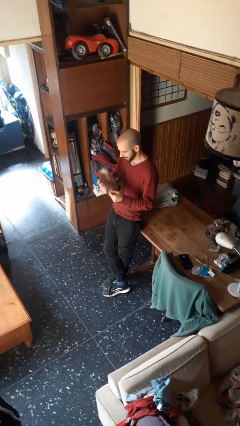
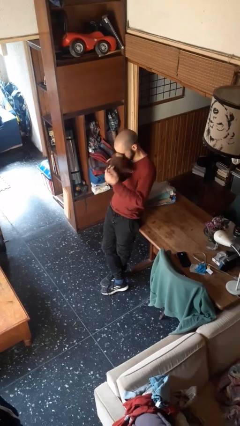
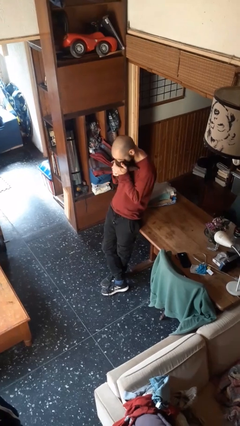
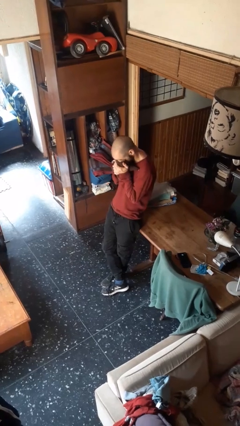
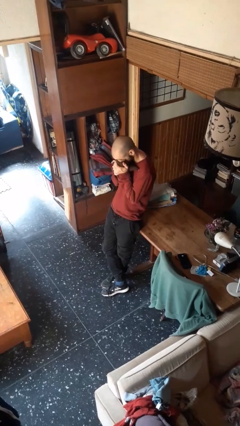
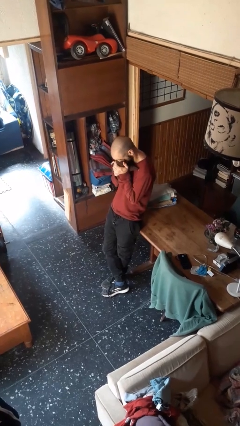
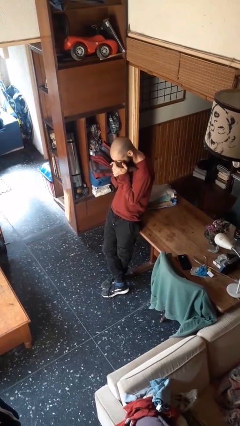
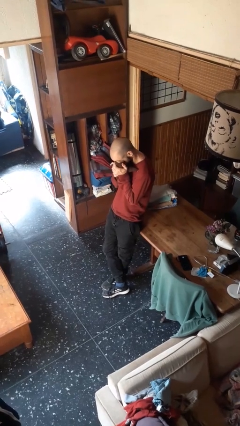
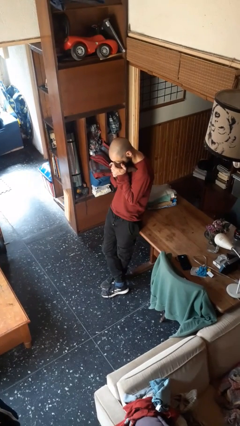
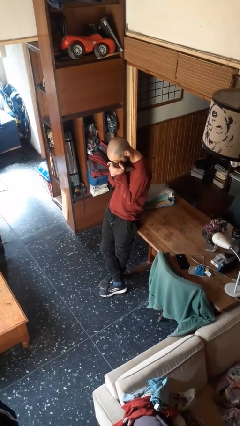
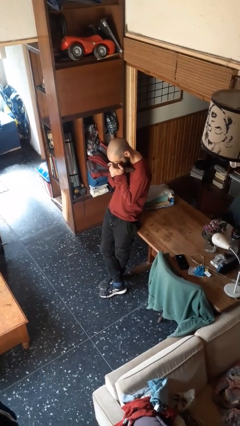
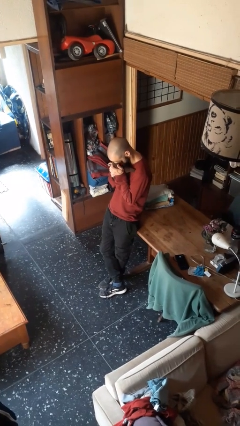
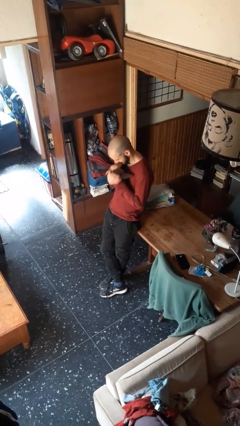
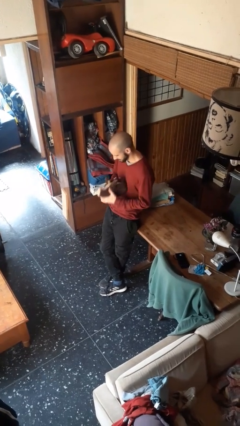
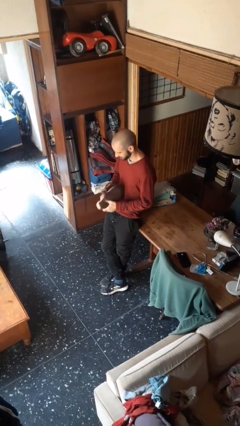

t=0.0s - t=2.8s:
person hugs stuffed animal

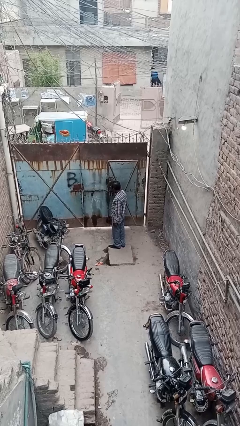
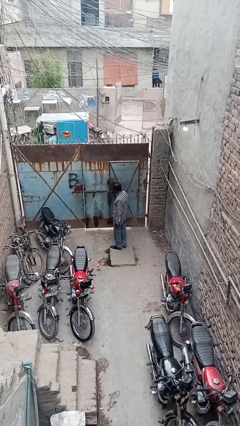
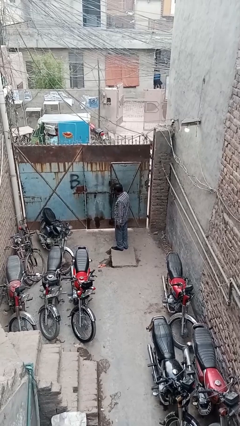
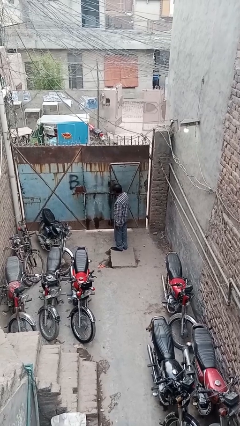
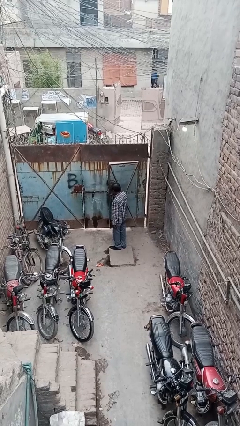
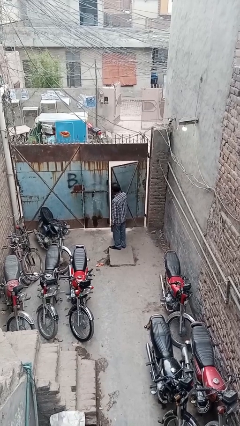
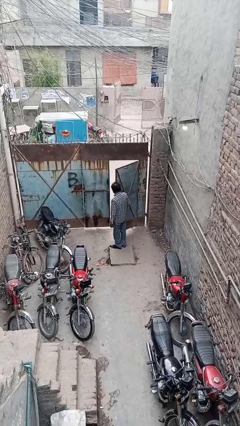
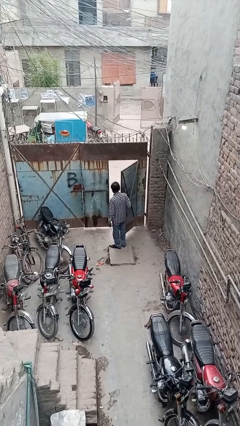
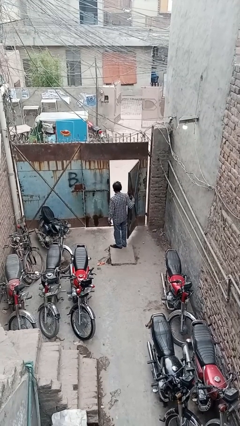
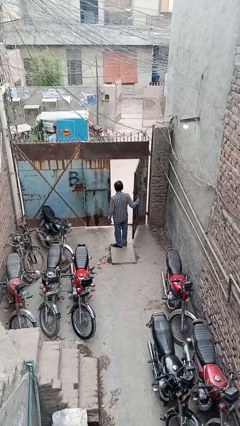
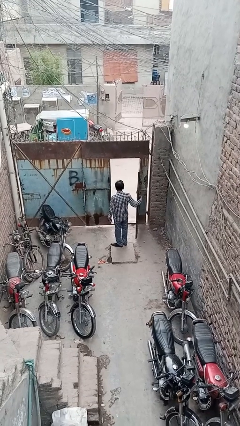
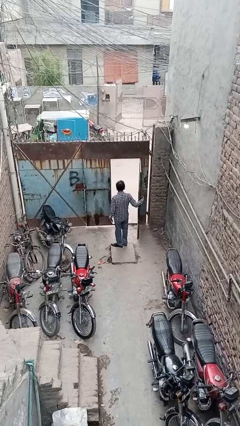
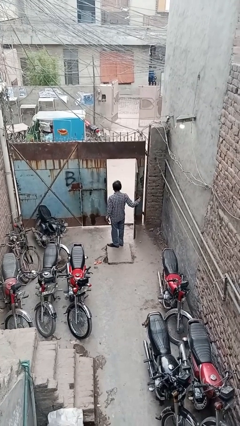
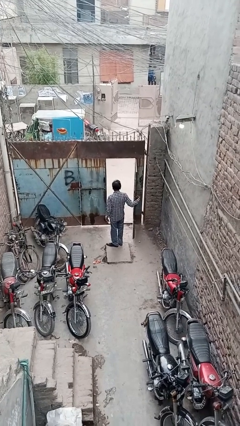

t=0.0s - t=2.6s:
person opens facility door

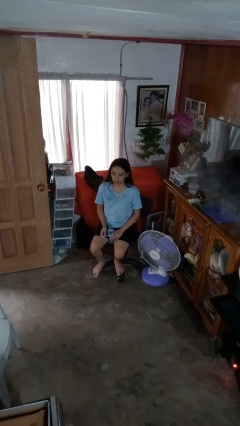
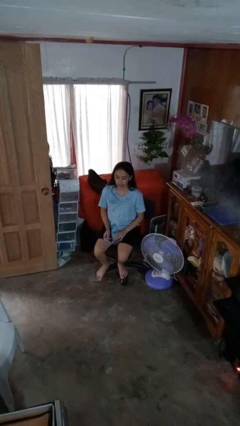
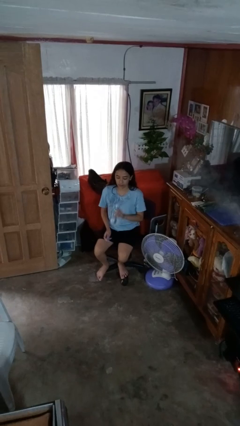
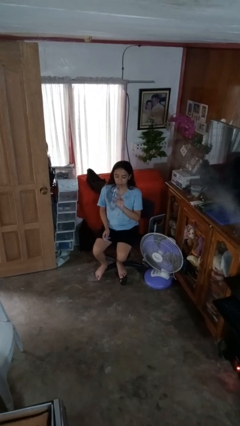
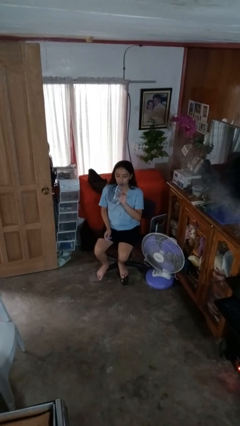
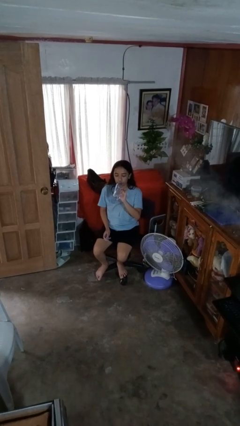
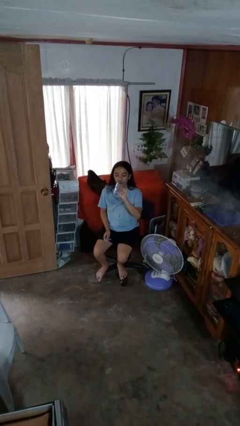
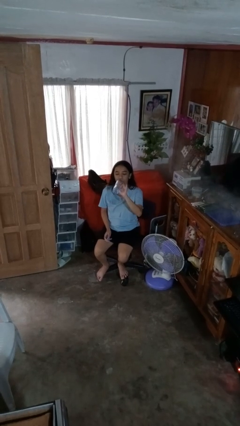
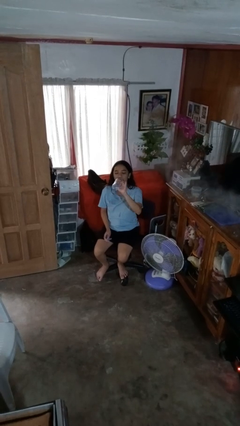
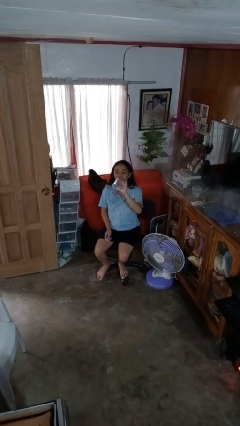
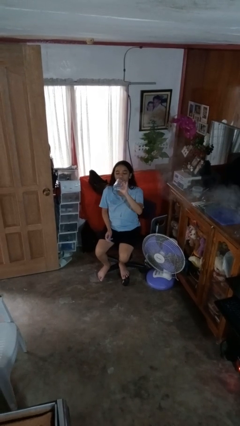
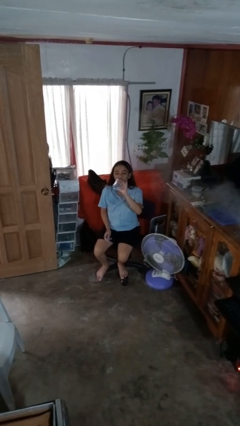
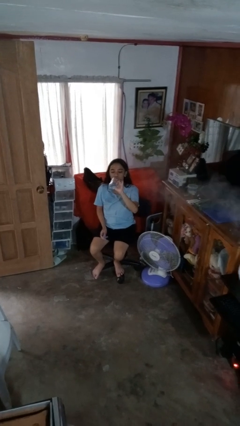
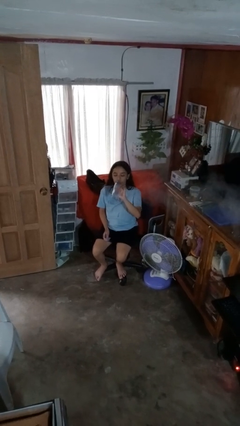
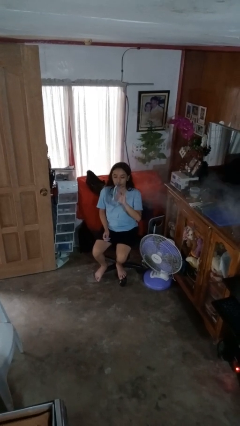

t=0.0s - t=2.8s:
person drinks from bottle

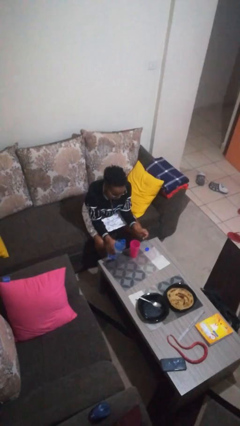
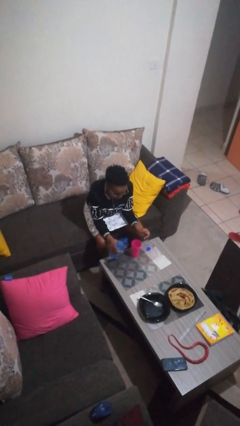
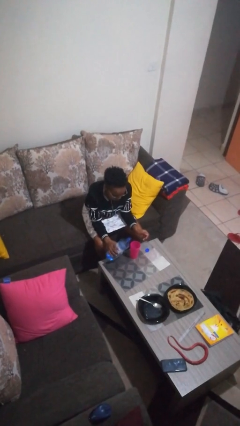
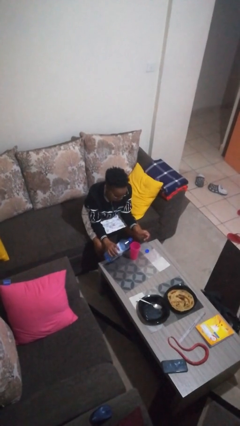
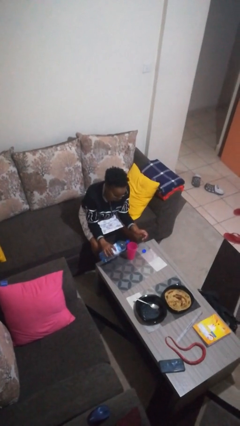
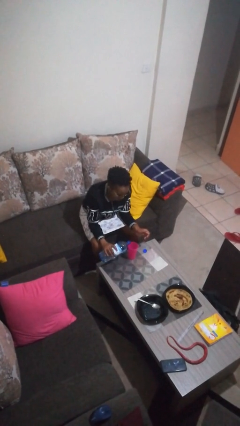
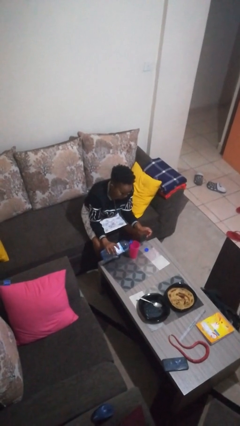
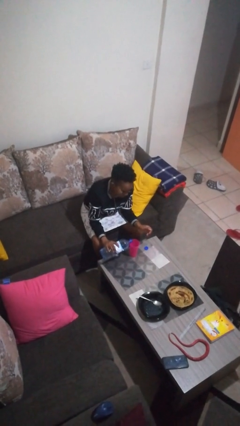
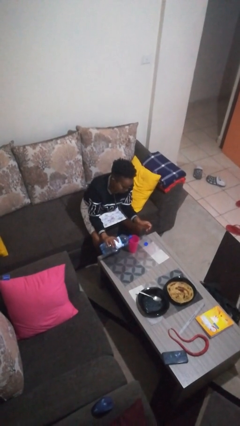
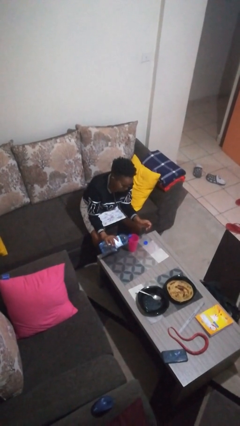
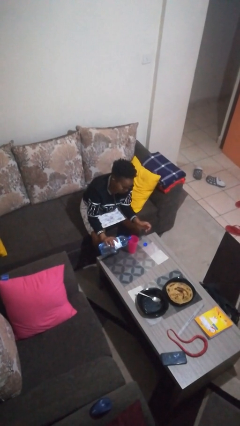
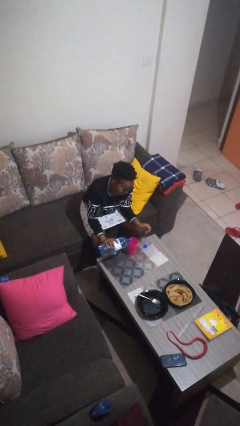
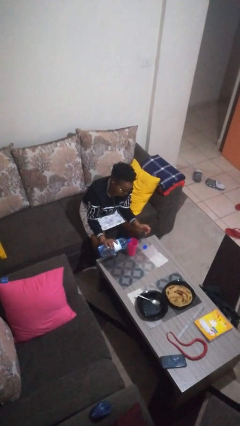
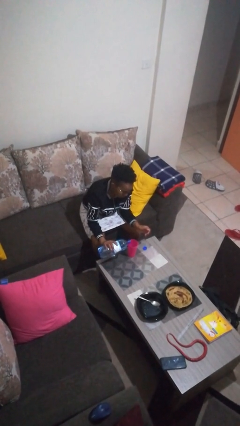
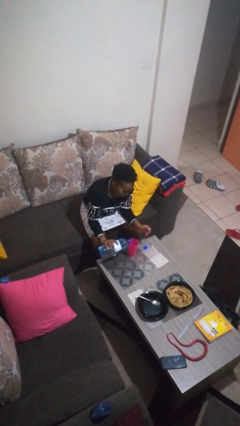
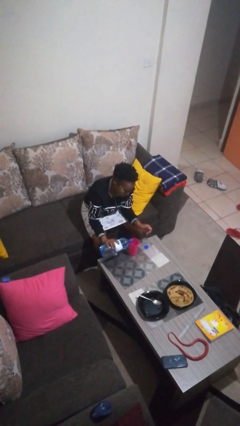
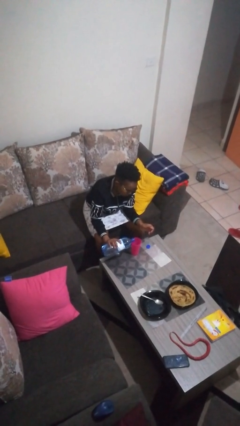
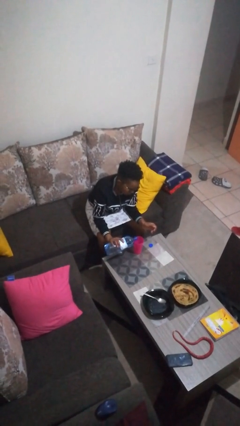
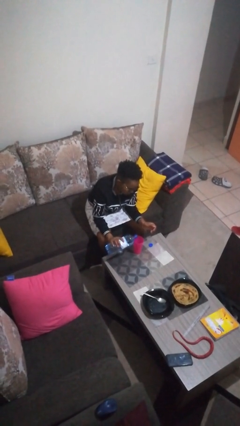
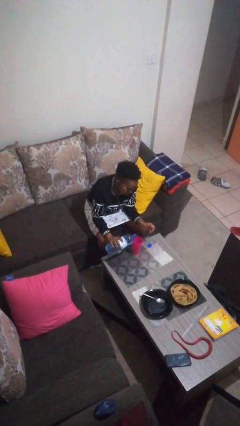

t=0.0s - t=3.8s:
person pours liquid into cup

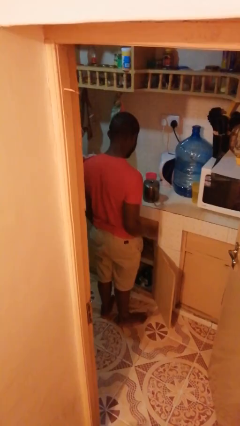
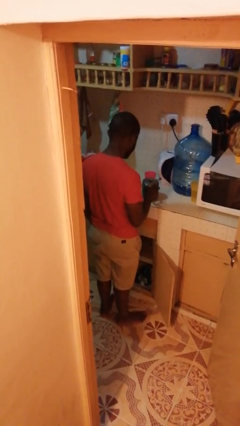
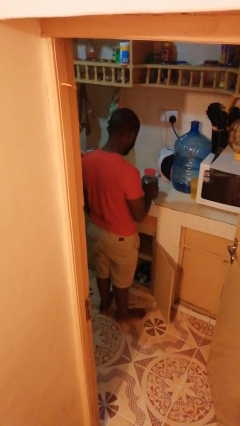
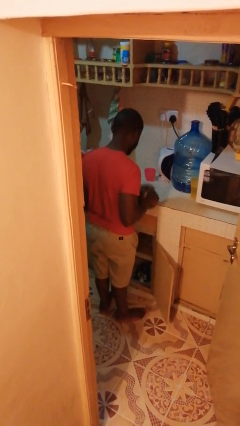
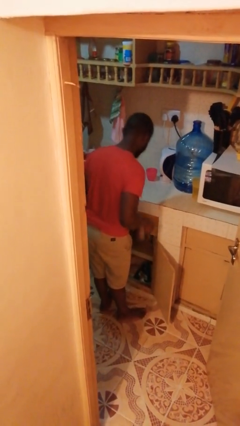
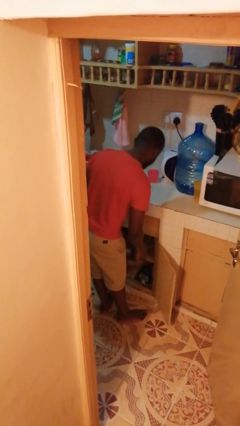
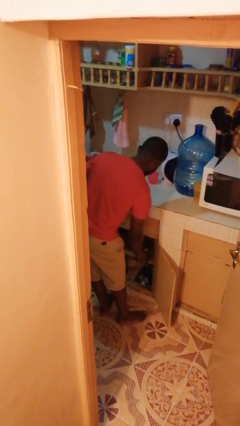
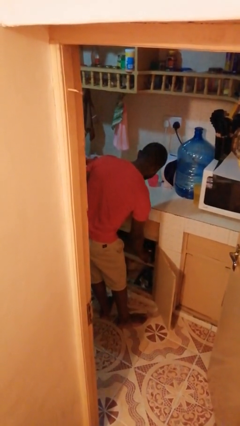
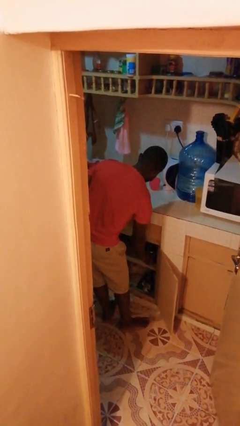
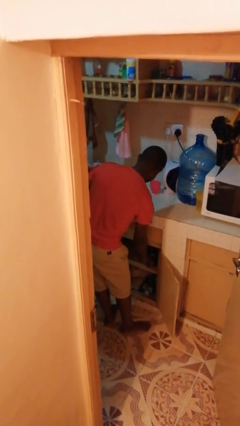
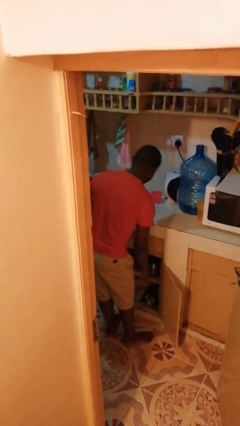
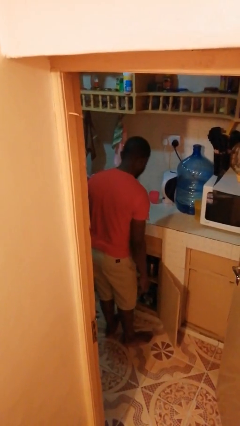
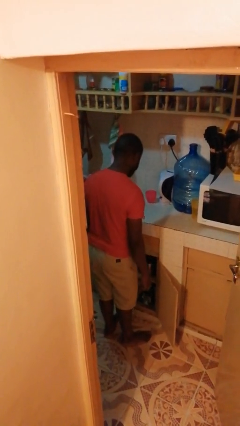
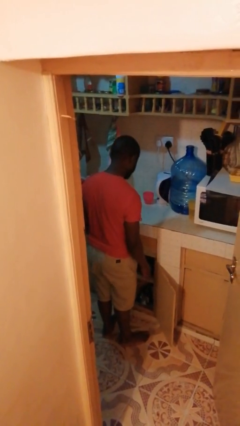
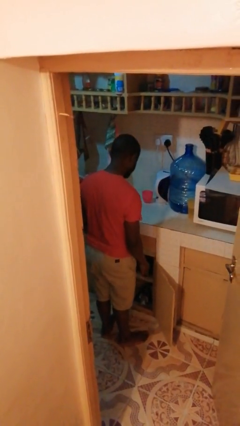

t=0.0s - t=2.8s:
person puts object in cabinet

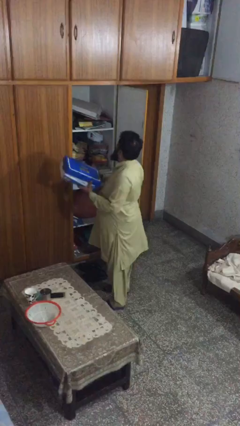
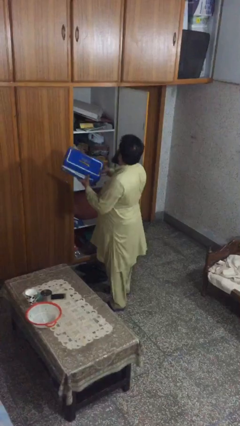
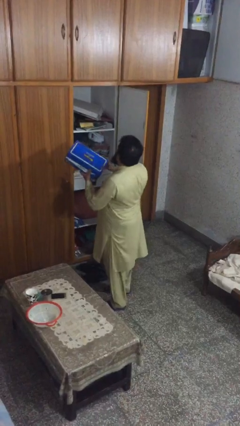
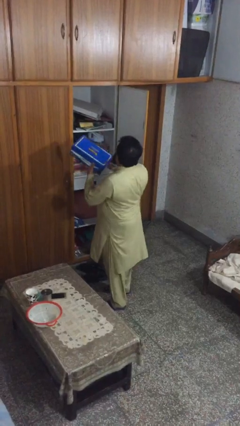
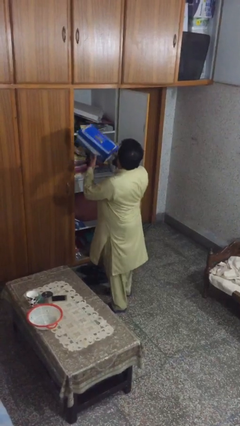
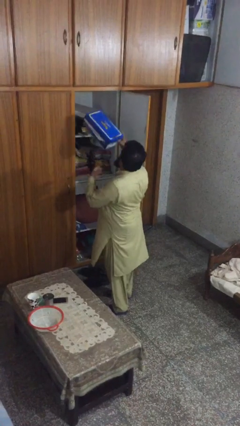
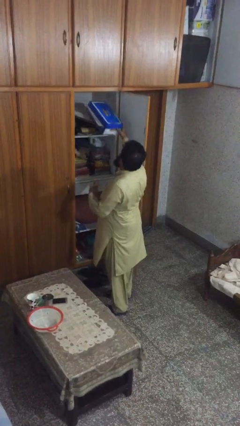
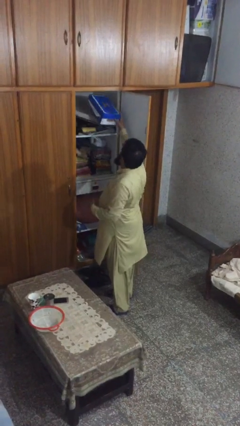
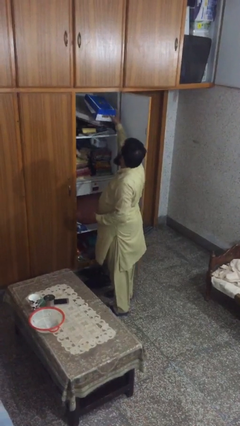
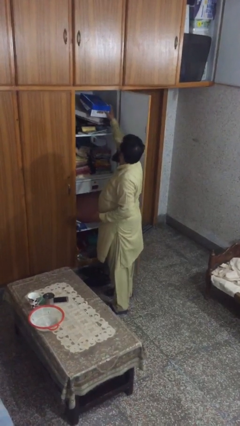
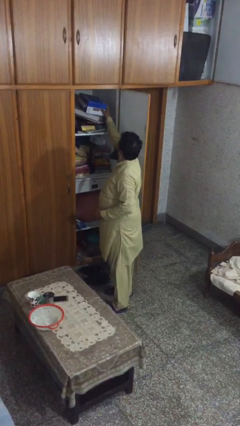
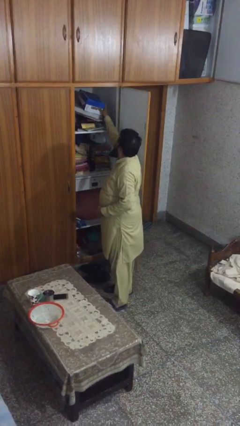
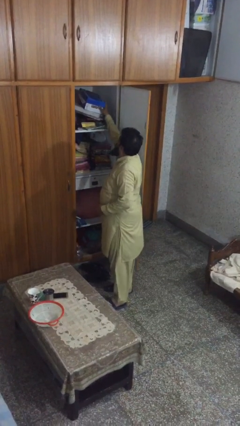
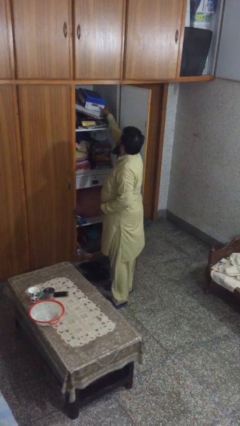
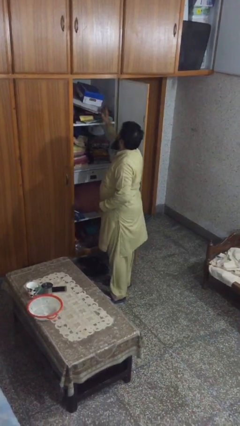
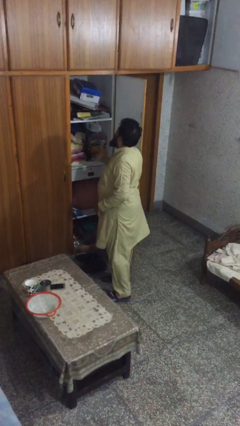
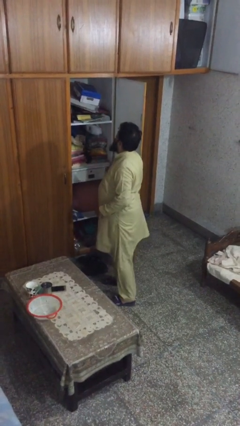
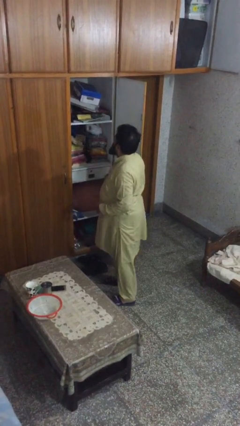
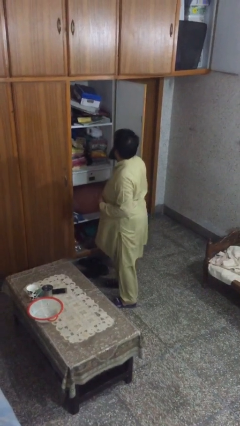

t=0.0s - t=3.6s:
person puts down object on shelf
